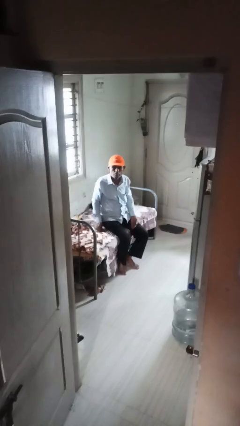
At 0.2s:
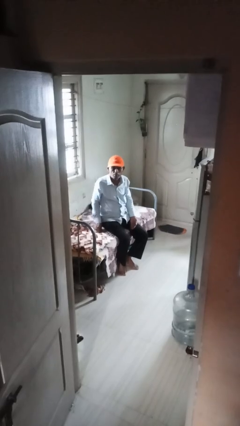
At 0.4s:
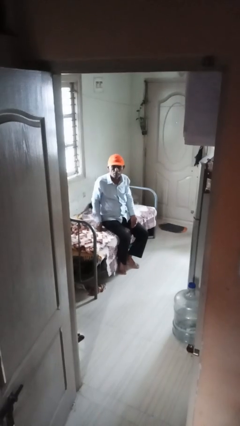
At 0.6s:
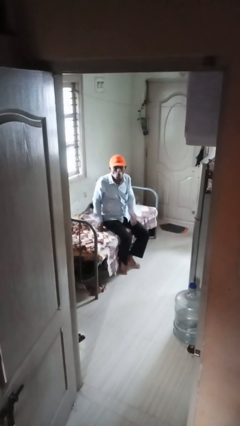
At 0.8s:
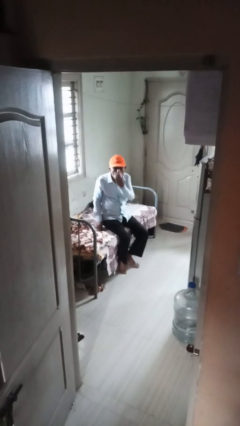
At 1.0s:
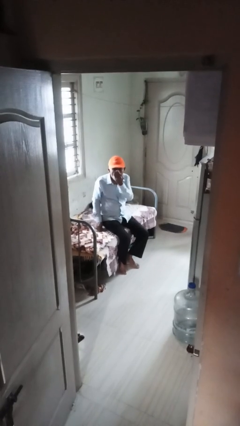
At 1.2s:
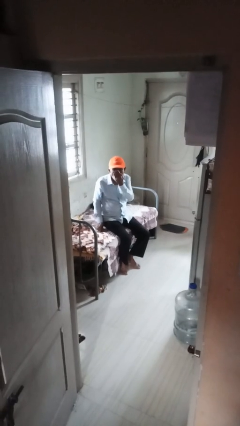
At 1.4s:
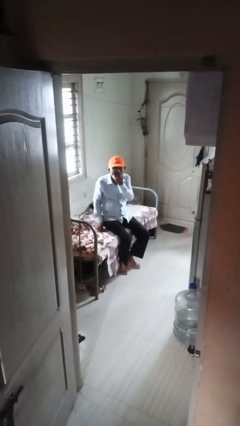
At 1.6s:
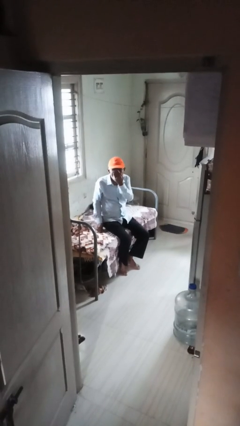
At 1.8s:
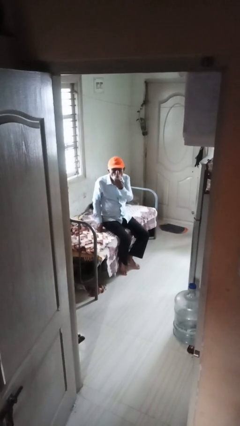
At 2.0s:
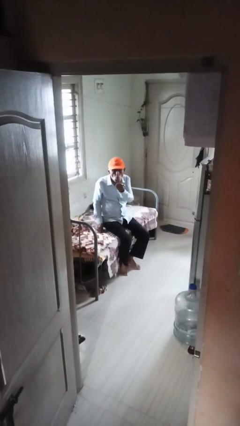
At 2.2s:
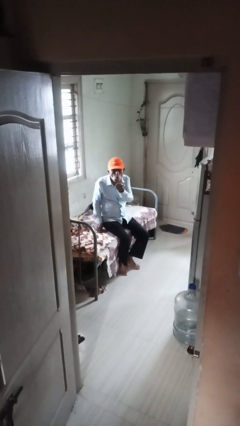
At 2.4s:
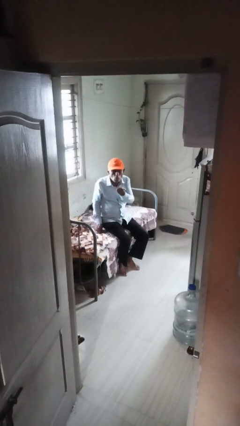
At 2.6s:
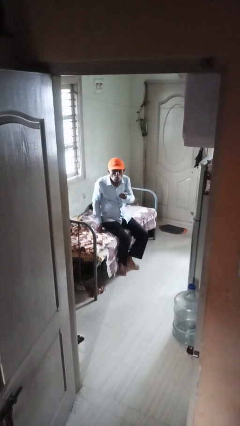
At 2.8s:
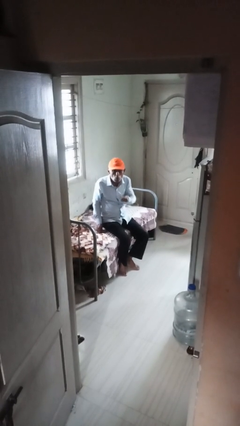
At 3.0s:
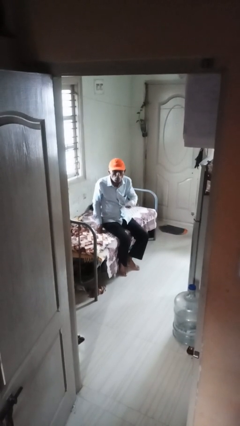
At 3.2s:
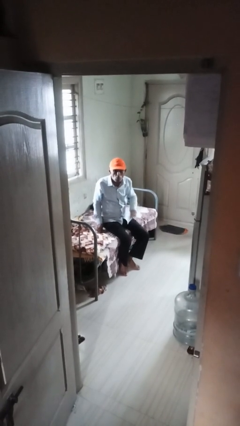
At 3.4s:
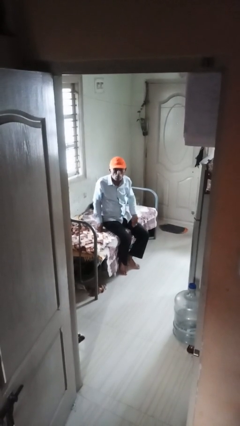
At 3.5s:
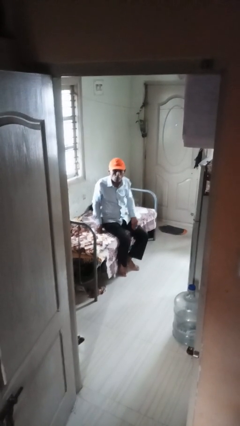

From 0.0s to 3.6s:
person gestures blow kiss

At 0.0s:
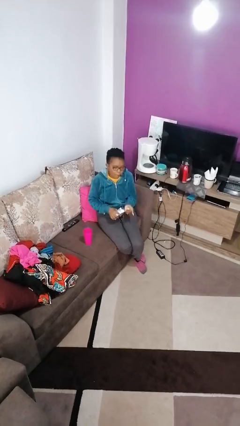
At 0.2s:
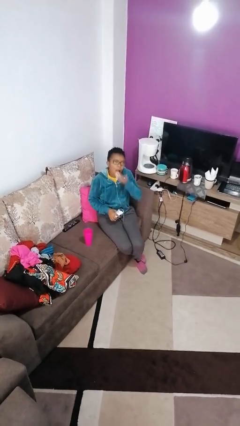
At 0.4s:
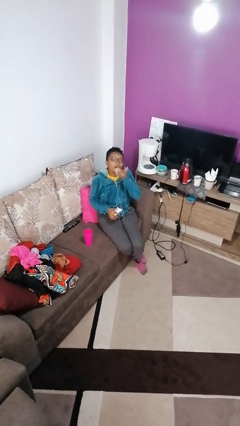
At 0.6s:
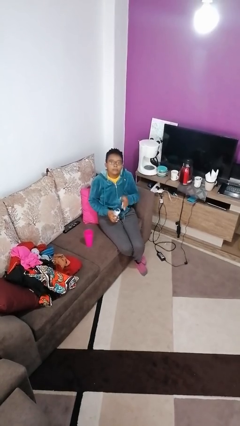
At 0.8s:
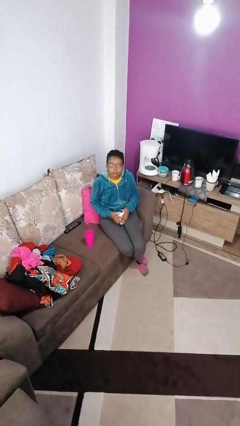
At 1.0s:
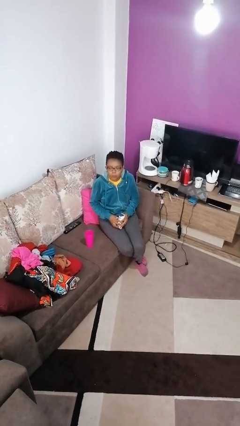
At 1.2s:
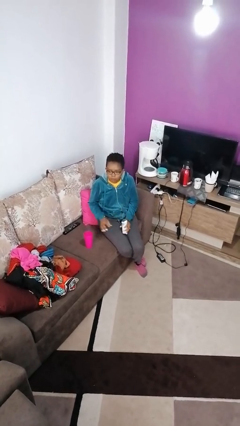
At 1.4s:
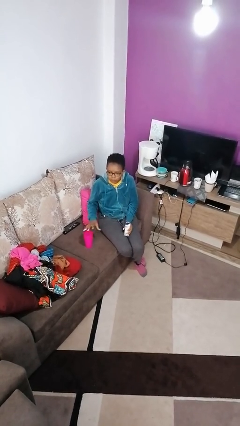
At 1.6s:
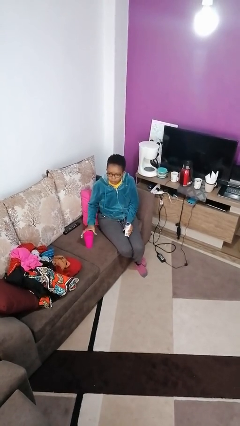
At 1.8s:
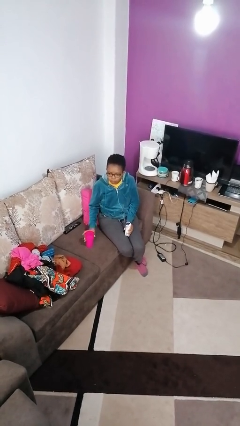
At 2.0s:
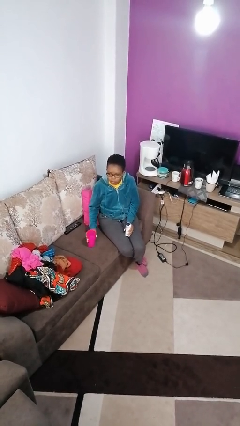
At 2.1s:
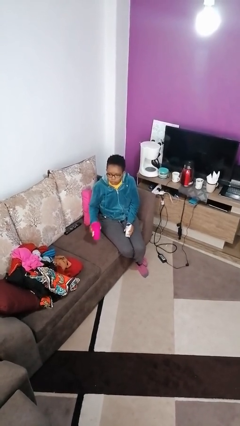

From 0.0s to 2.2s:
person takes medicine pills

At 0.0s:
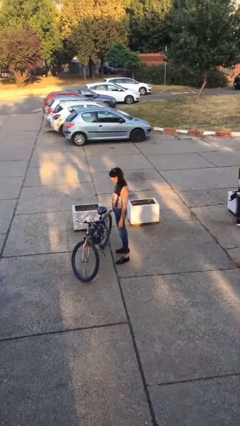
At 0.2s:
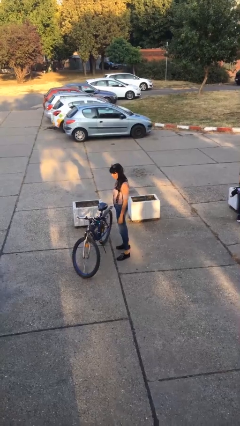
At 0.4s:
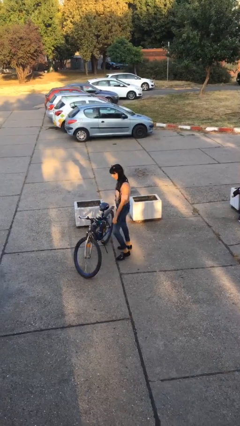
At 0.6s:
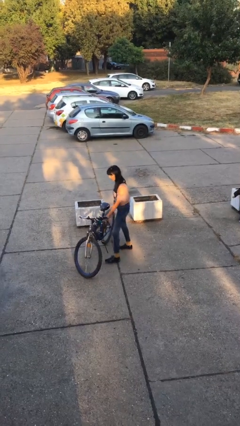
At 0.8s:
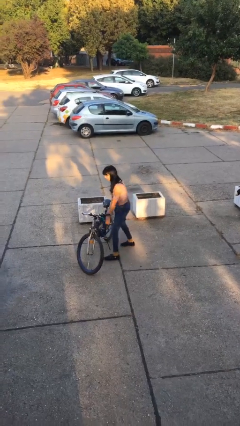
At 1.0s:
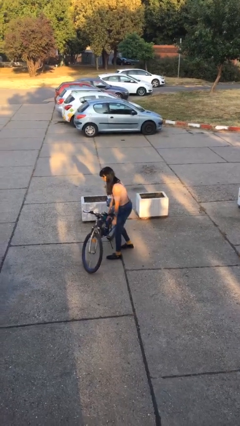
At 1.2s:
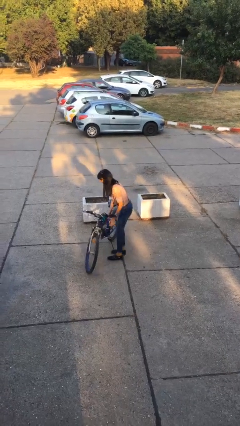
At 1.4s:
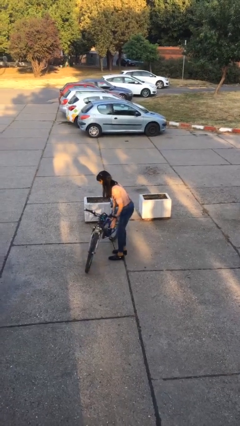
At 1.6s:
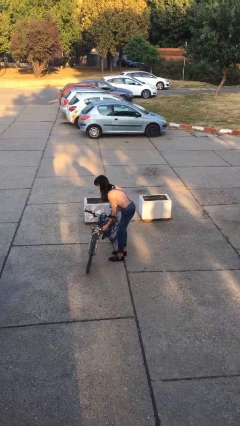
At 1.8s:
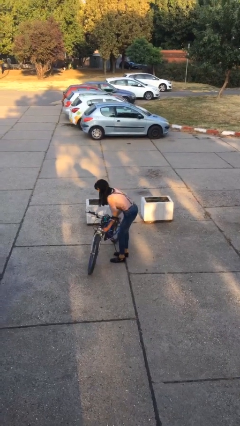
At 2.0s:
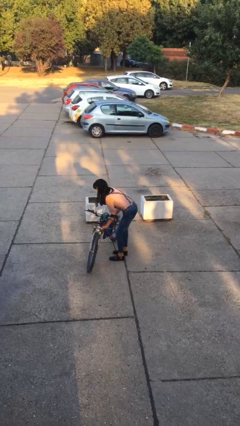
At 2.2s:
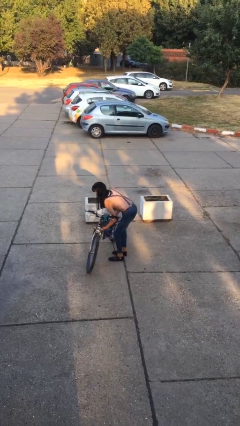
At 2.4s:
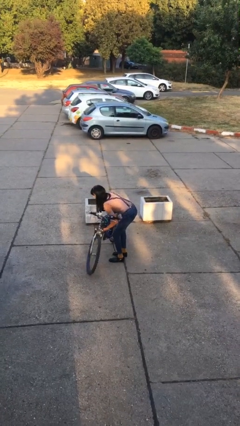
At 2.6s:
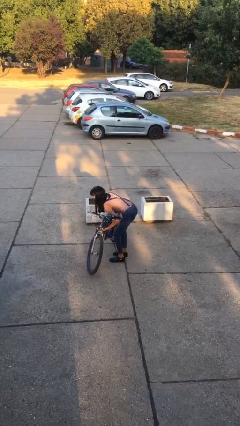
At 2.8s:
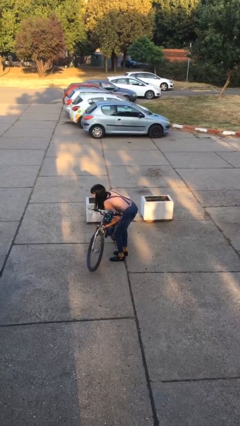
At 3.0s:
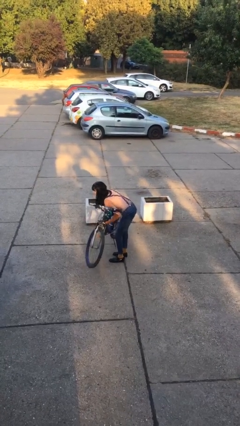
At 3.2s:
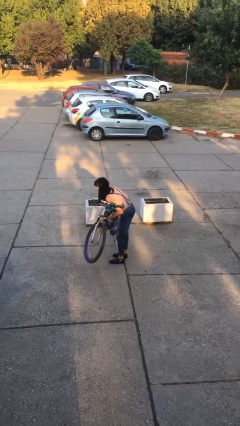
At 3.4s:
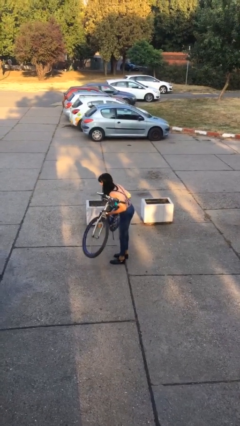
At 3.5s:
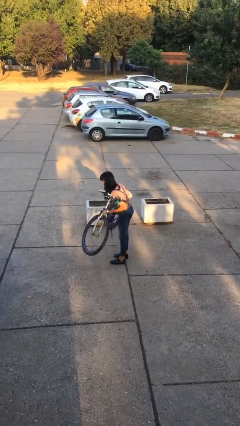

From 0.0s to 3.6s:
person picks up object from floor

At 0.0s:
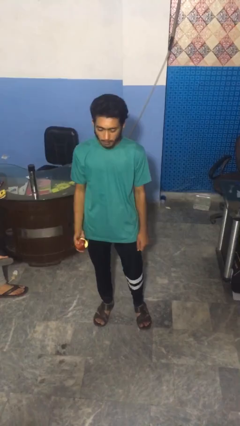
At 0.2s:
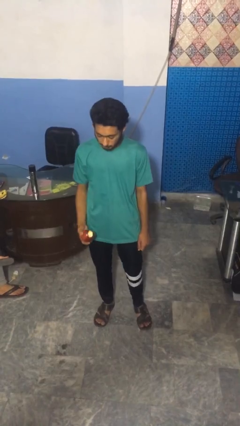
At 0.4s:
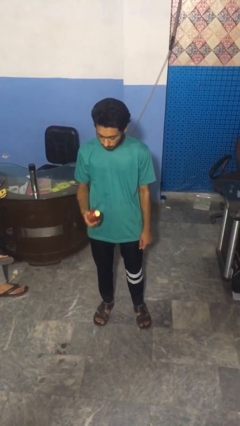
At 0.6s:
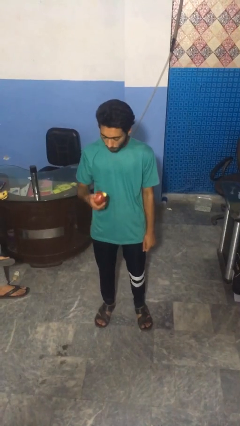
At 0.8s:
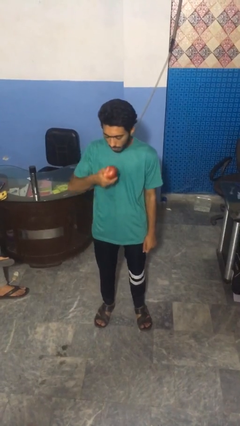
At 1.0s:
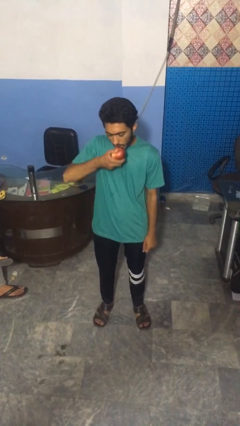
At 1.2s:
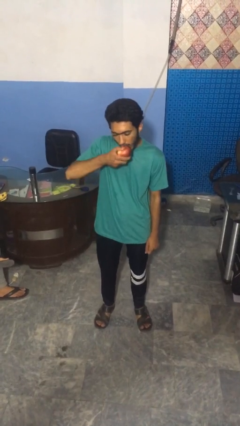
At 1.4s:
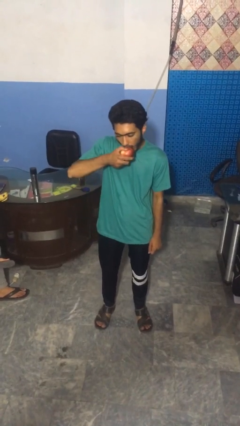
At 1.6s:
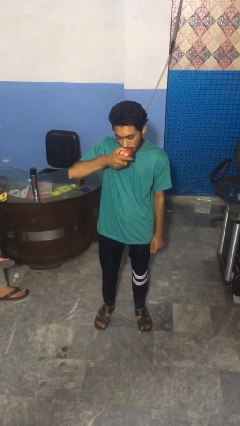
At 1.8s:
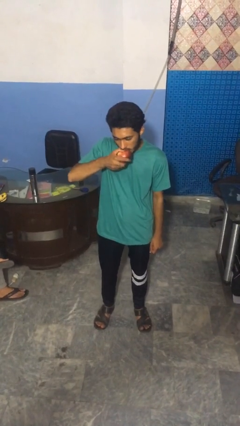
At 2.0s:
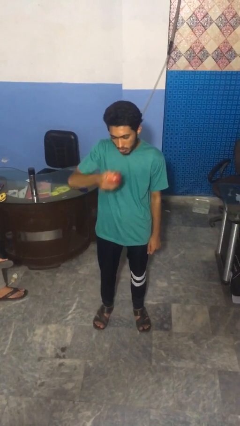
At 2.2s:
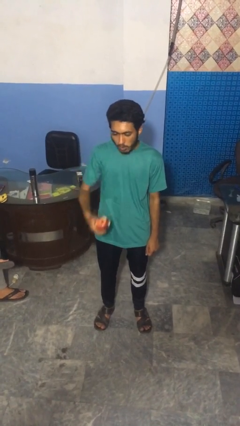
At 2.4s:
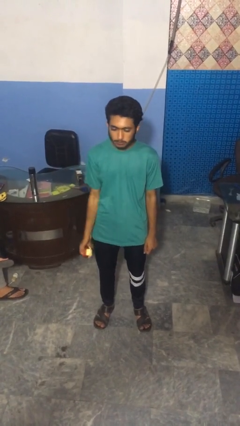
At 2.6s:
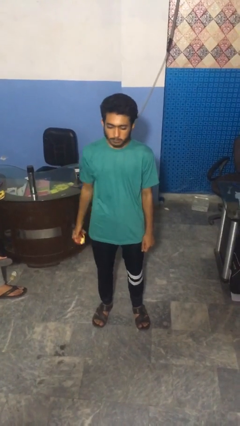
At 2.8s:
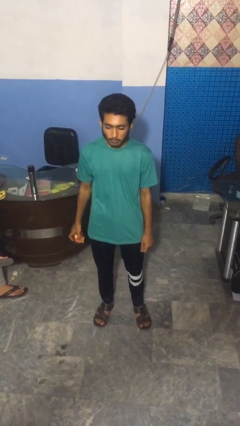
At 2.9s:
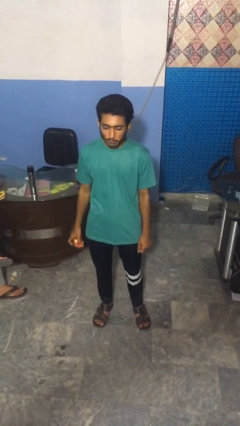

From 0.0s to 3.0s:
person eats apple

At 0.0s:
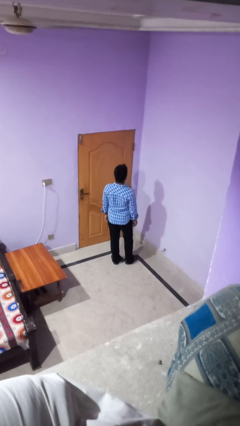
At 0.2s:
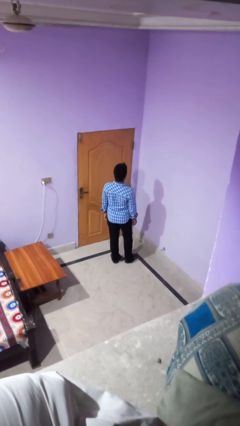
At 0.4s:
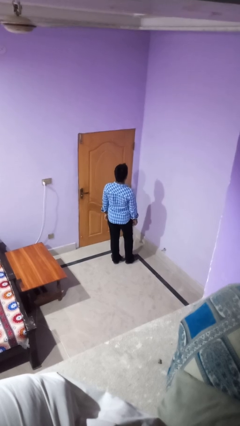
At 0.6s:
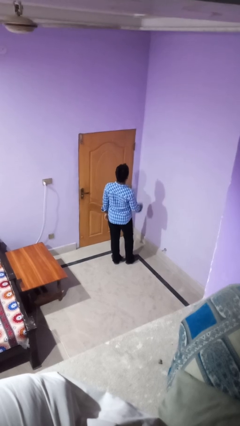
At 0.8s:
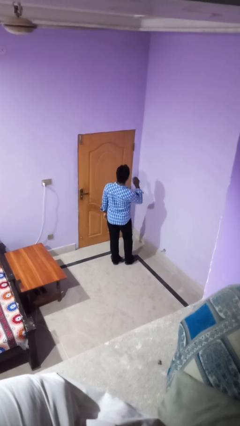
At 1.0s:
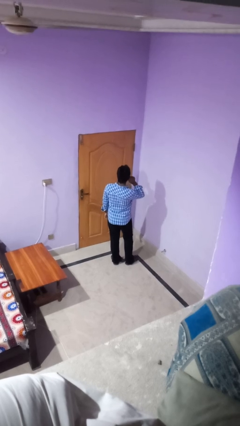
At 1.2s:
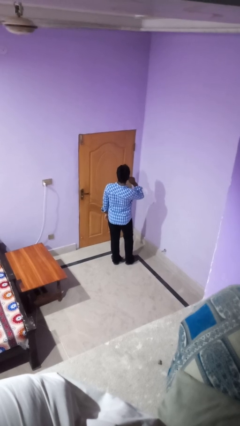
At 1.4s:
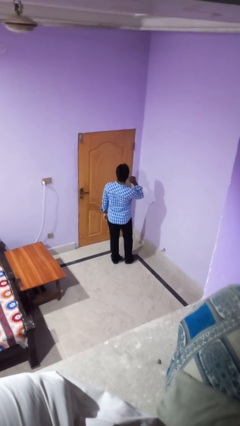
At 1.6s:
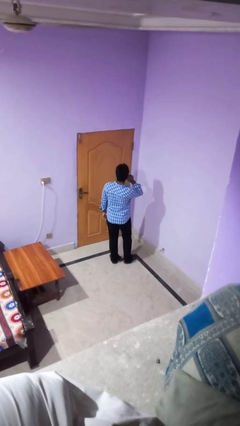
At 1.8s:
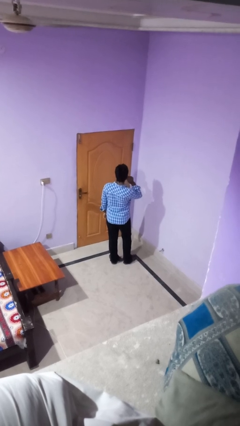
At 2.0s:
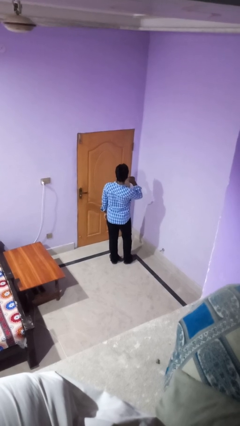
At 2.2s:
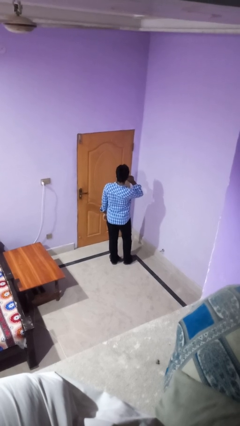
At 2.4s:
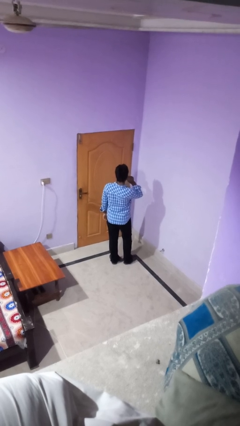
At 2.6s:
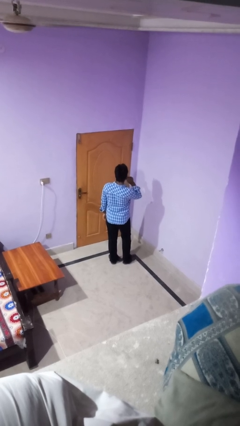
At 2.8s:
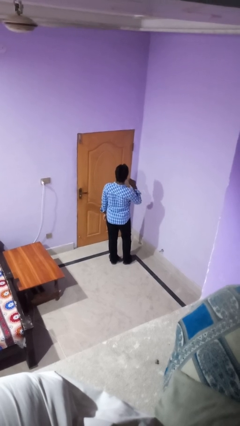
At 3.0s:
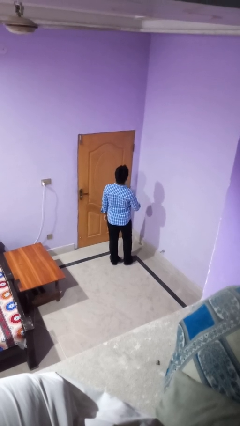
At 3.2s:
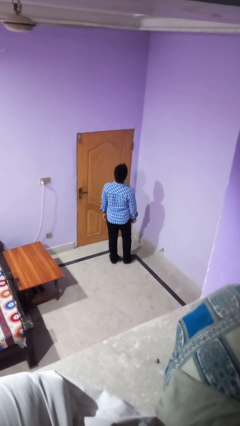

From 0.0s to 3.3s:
person touches earlobe

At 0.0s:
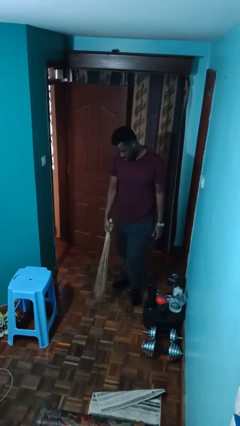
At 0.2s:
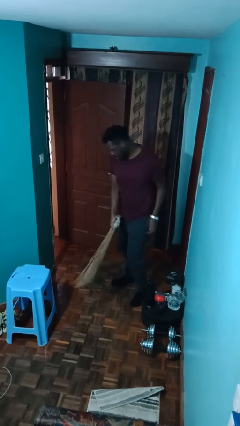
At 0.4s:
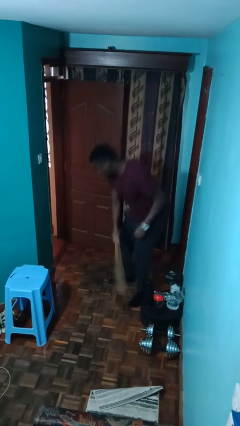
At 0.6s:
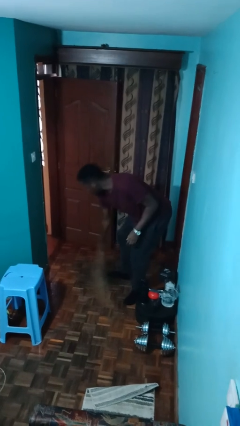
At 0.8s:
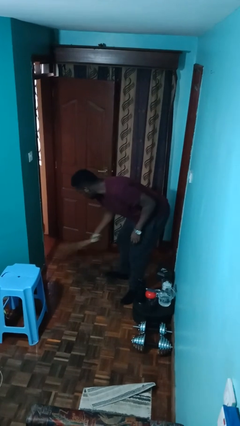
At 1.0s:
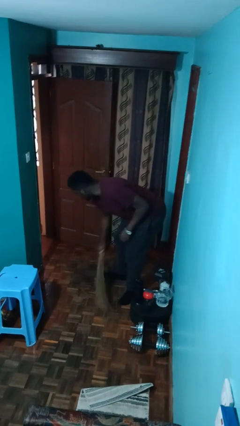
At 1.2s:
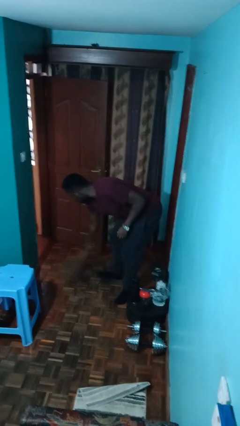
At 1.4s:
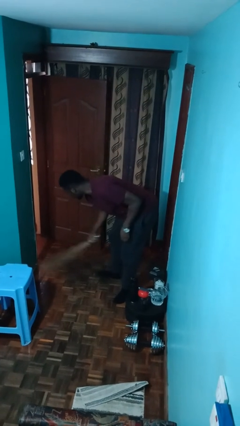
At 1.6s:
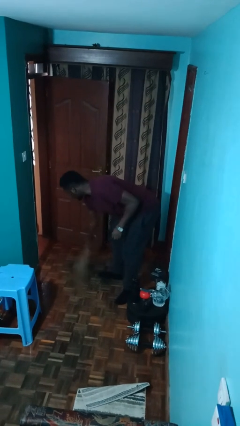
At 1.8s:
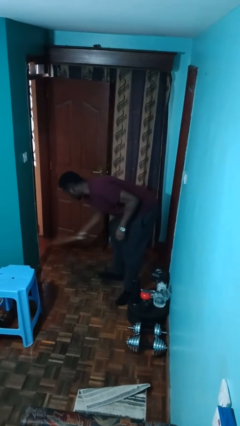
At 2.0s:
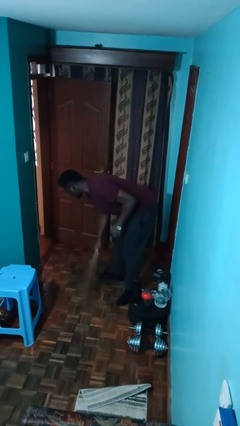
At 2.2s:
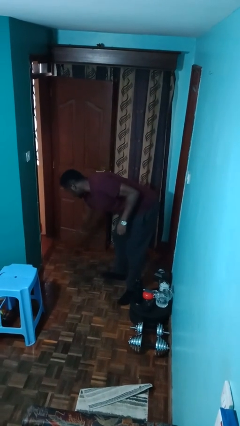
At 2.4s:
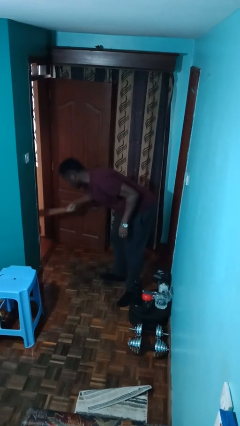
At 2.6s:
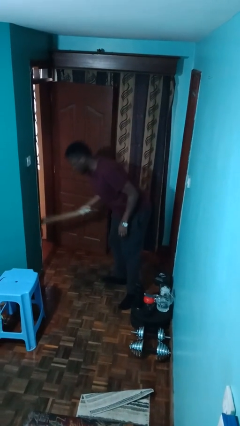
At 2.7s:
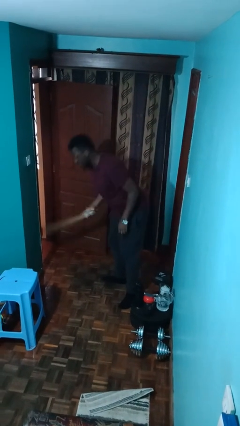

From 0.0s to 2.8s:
person sweeps floor
